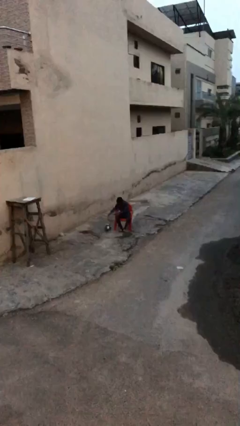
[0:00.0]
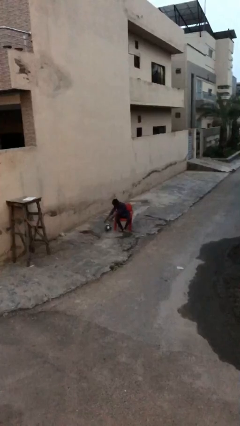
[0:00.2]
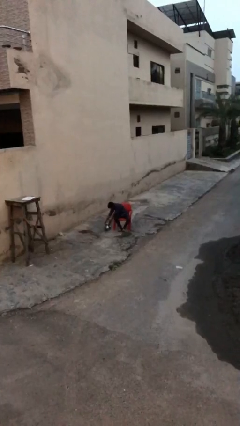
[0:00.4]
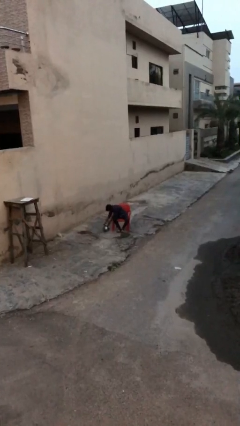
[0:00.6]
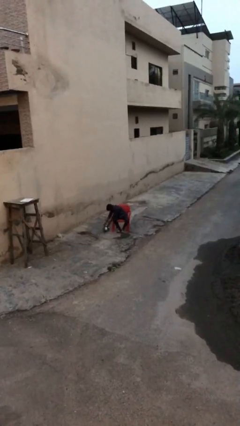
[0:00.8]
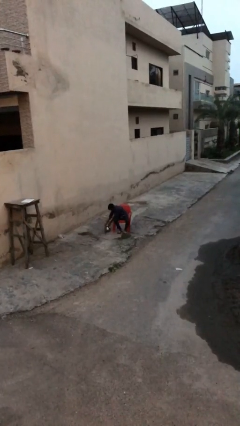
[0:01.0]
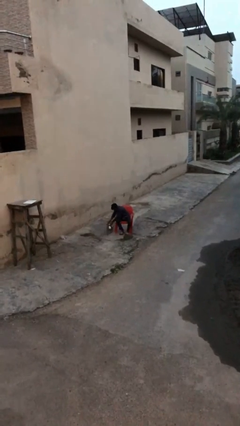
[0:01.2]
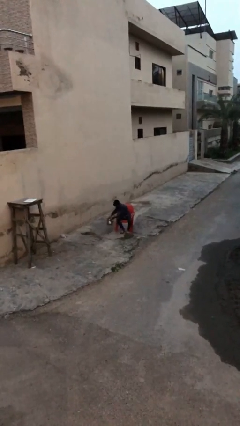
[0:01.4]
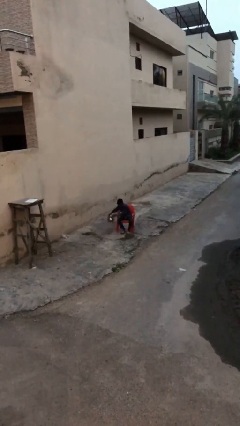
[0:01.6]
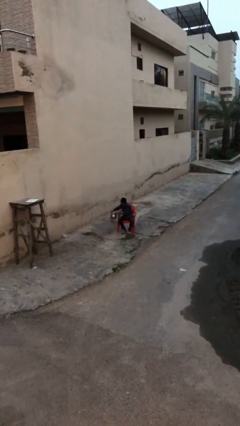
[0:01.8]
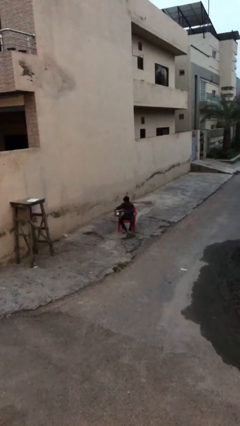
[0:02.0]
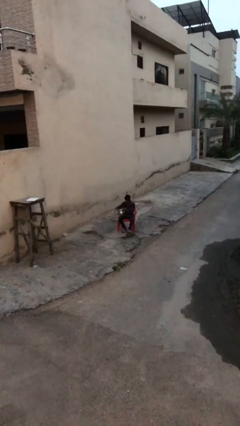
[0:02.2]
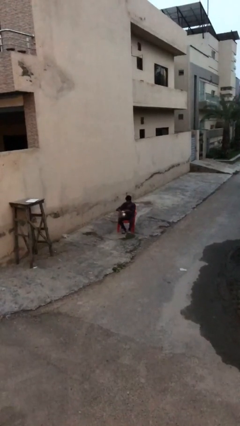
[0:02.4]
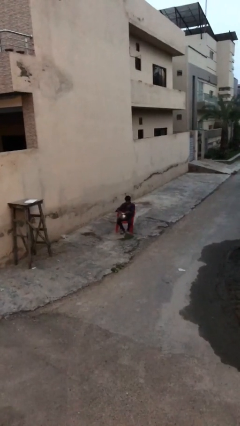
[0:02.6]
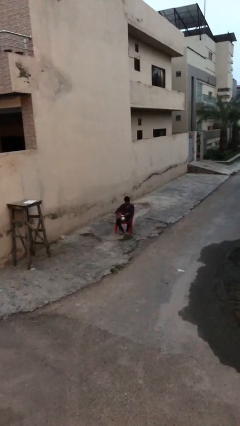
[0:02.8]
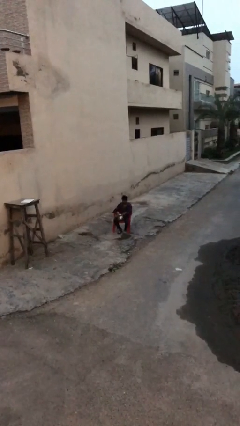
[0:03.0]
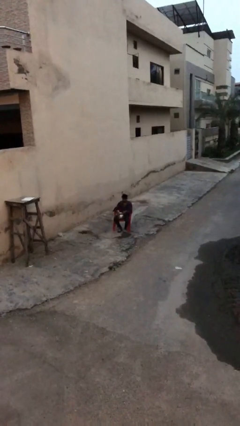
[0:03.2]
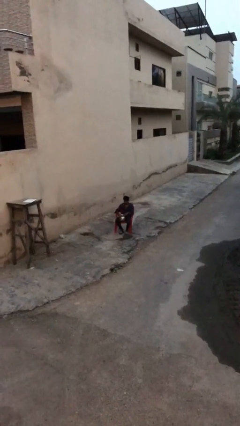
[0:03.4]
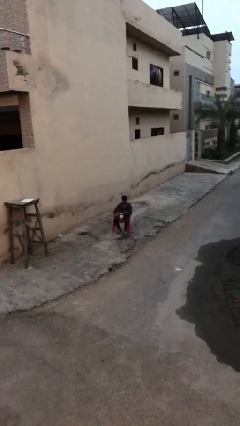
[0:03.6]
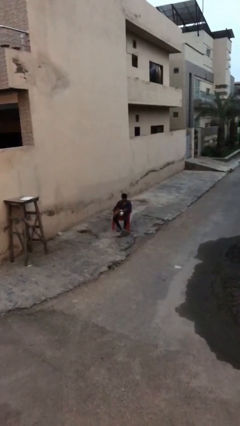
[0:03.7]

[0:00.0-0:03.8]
person picks up object from floor

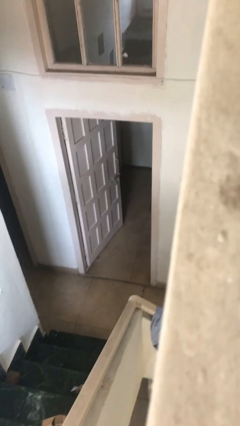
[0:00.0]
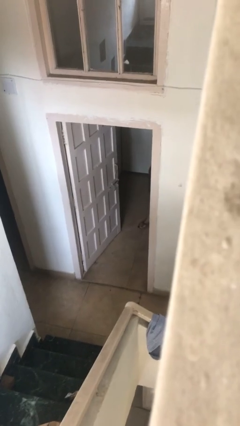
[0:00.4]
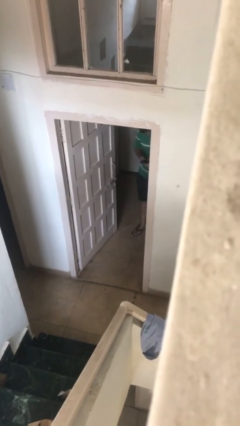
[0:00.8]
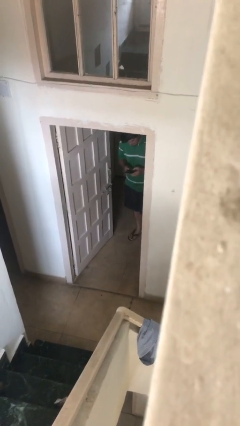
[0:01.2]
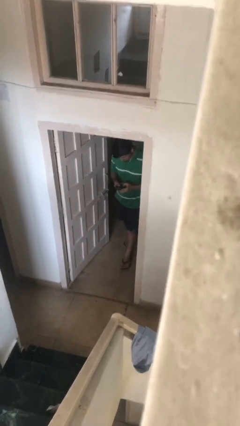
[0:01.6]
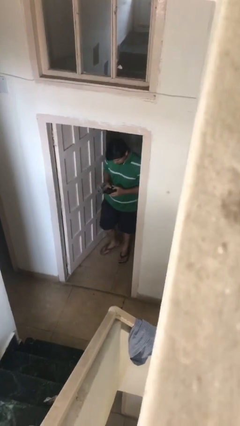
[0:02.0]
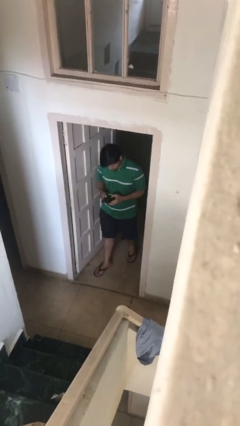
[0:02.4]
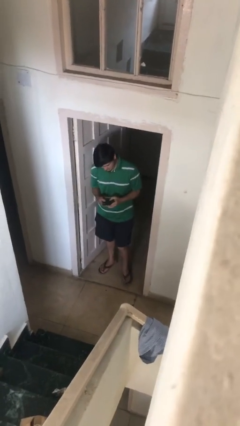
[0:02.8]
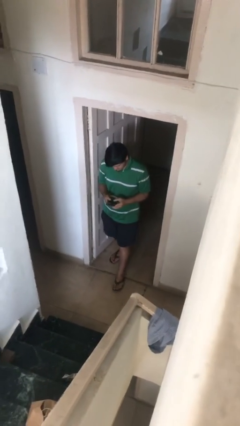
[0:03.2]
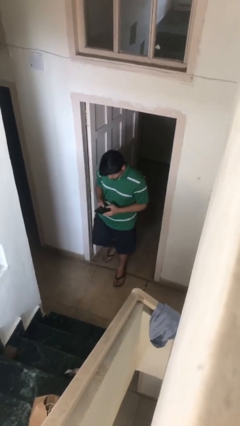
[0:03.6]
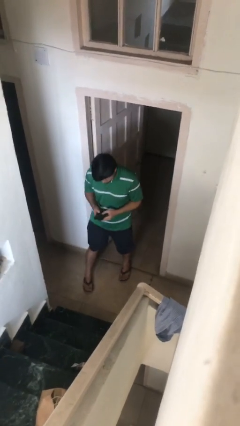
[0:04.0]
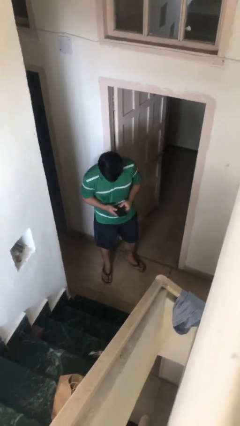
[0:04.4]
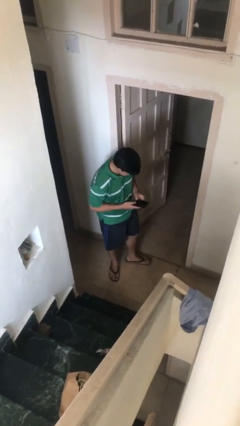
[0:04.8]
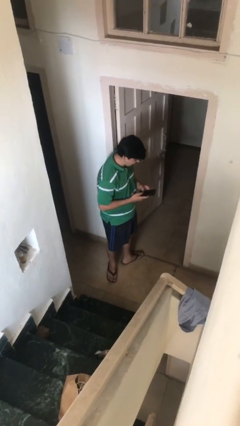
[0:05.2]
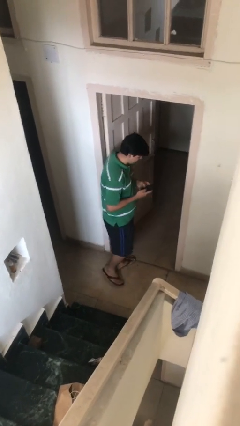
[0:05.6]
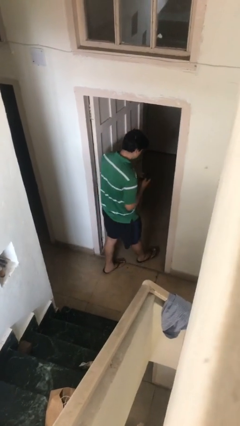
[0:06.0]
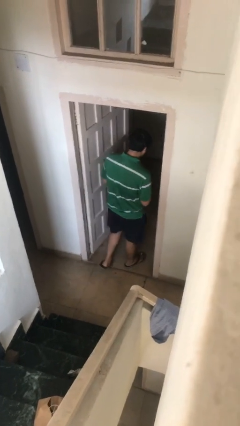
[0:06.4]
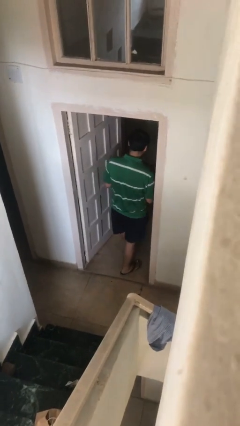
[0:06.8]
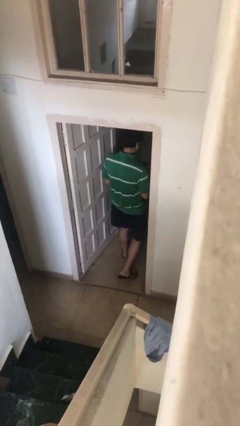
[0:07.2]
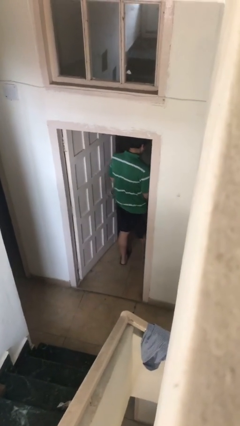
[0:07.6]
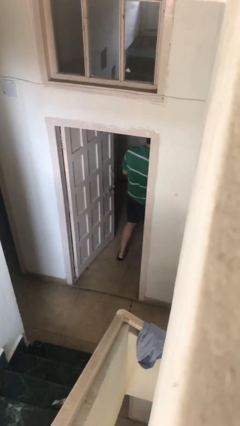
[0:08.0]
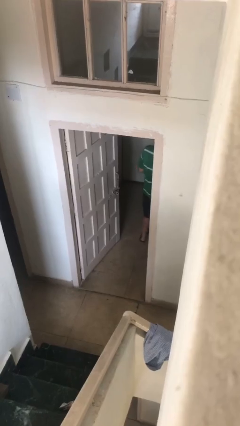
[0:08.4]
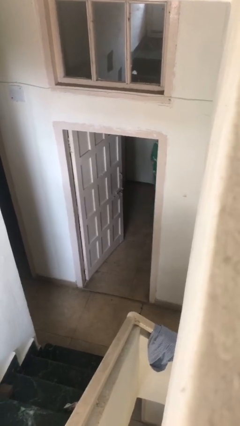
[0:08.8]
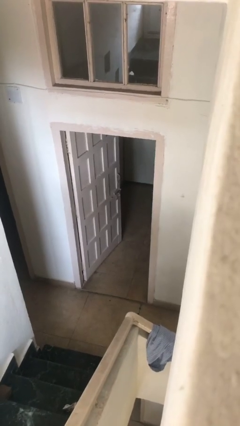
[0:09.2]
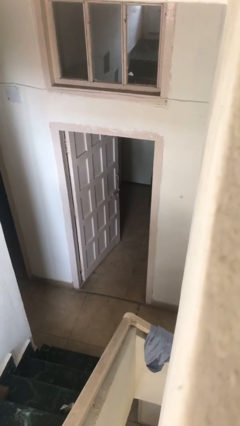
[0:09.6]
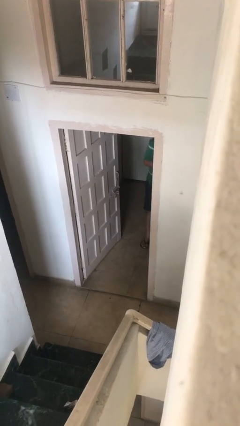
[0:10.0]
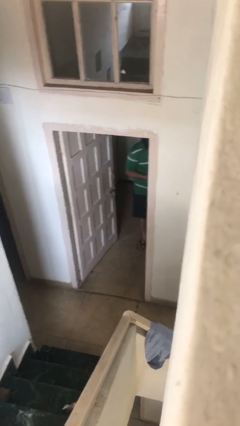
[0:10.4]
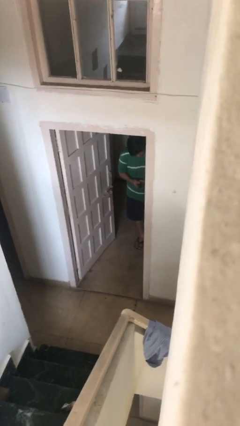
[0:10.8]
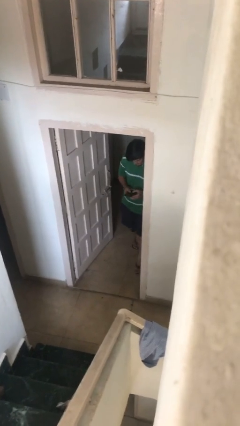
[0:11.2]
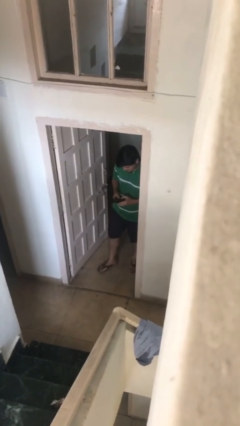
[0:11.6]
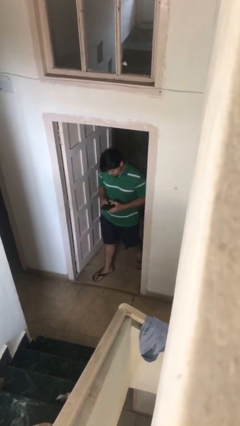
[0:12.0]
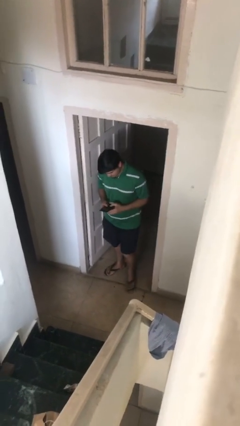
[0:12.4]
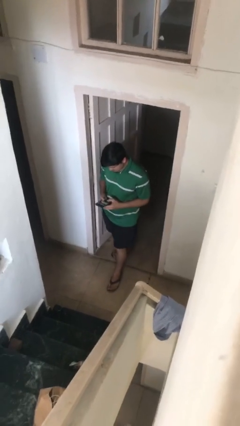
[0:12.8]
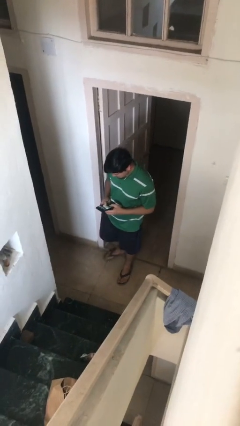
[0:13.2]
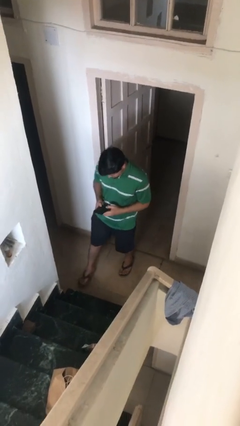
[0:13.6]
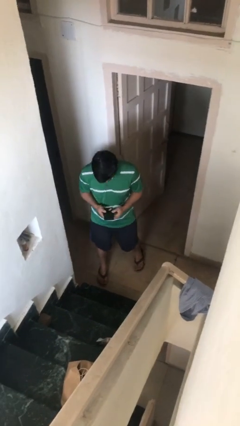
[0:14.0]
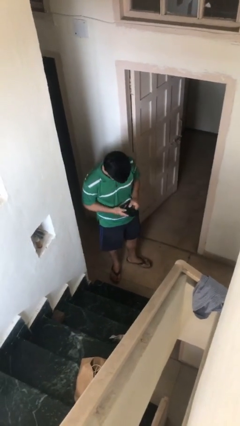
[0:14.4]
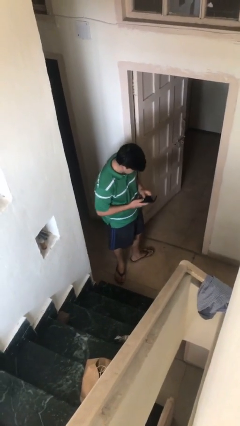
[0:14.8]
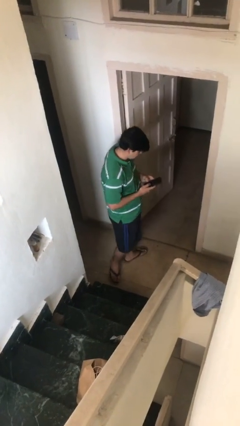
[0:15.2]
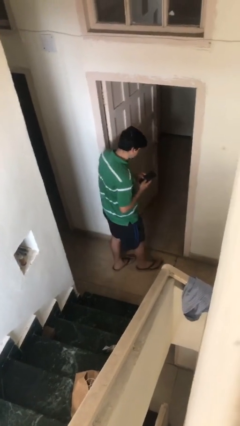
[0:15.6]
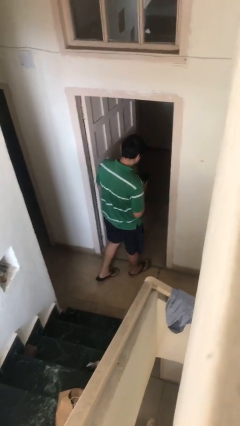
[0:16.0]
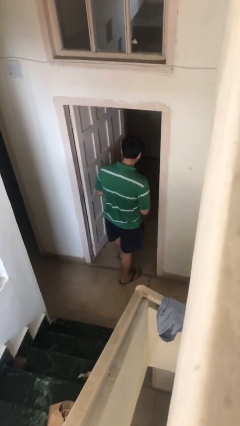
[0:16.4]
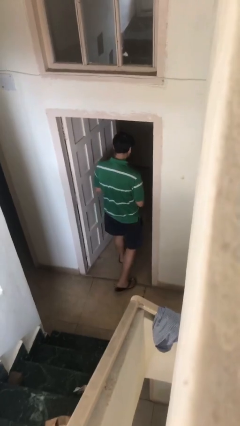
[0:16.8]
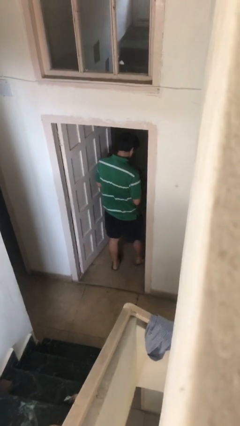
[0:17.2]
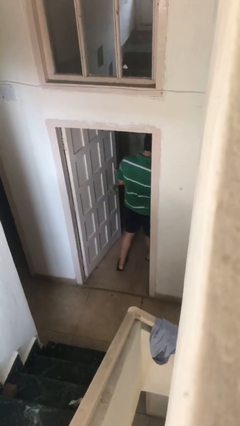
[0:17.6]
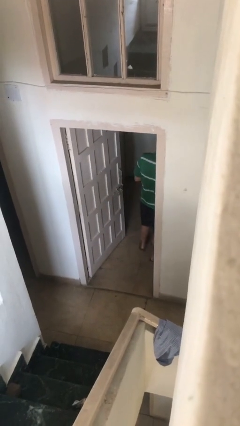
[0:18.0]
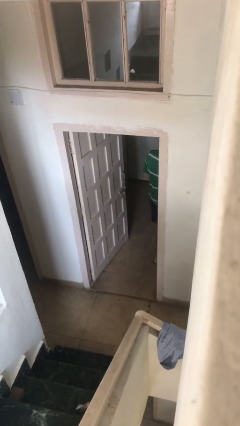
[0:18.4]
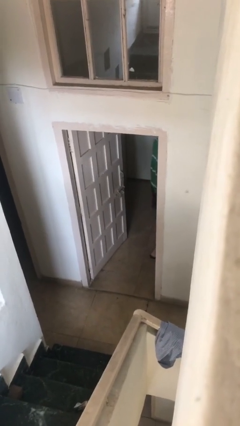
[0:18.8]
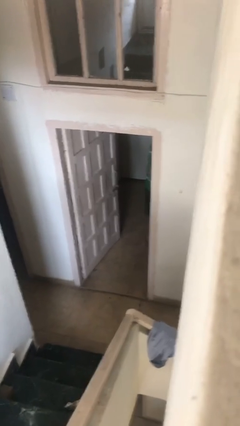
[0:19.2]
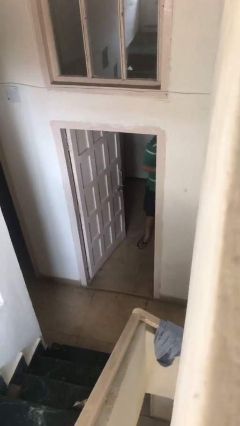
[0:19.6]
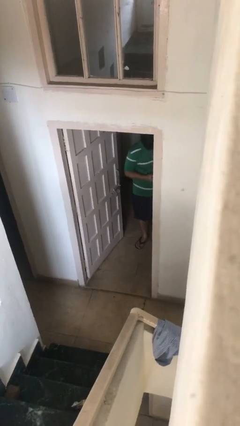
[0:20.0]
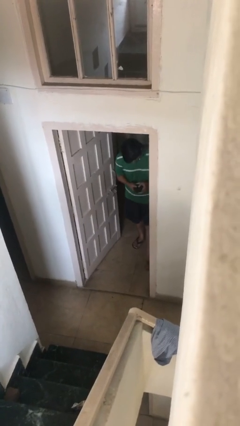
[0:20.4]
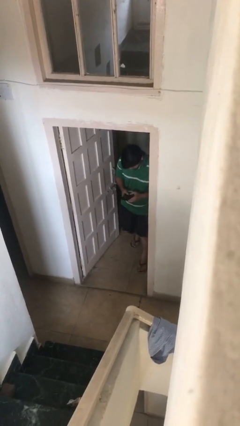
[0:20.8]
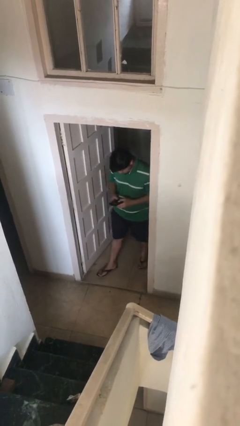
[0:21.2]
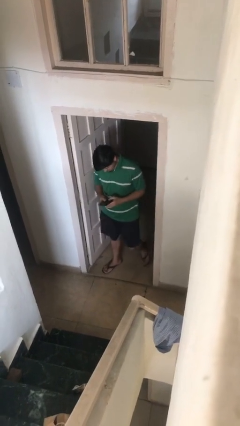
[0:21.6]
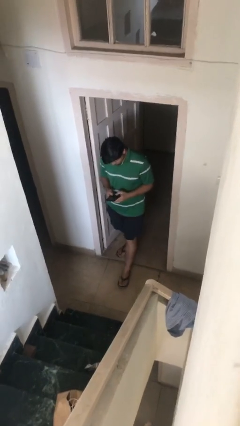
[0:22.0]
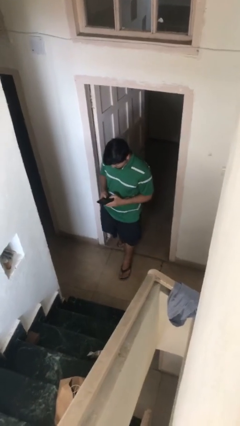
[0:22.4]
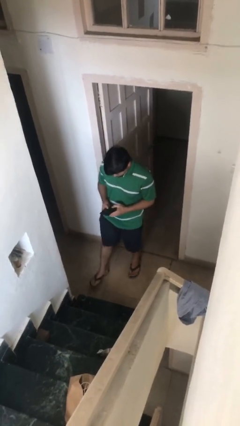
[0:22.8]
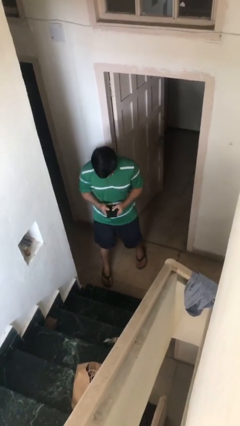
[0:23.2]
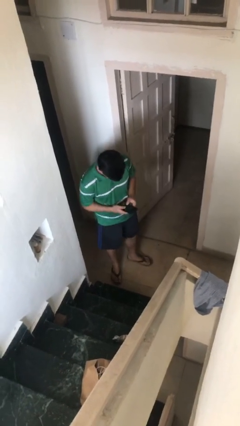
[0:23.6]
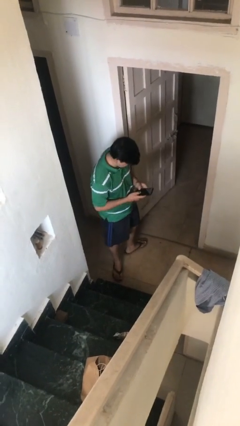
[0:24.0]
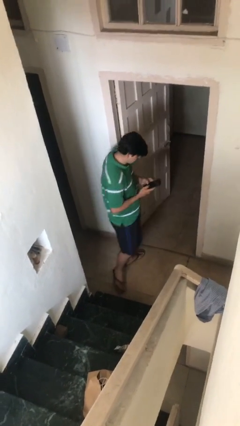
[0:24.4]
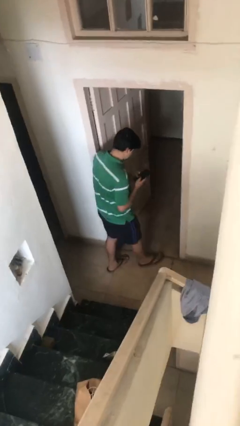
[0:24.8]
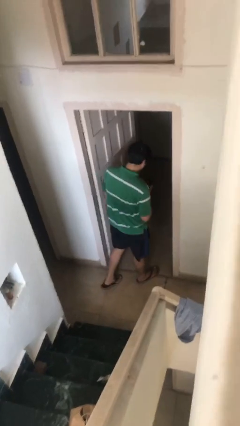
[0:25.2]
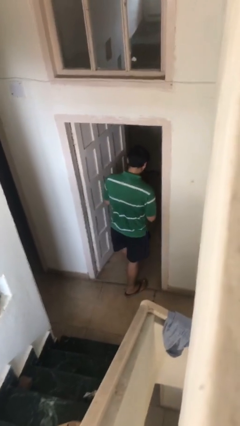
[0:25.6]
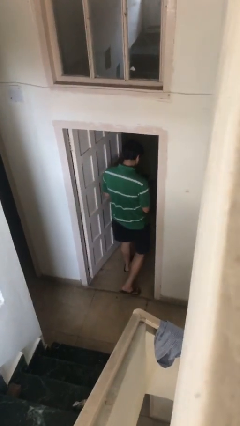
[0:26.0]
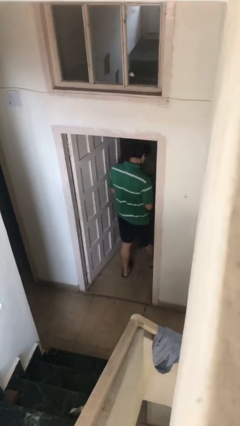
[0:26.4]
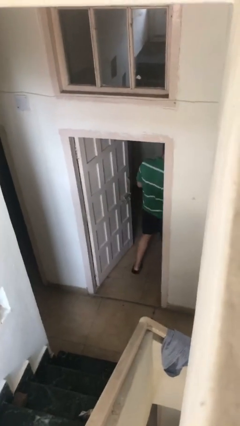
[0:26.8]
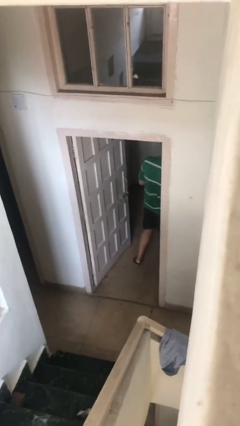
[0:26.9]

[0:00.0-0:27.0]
person texts on phone

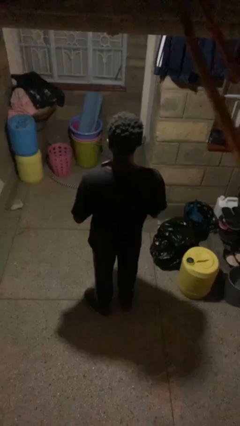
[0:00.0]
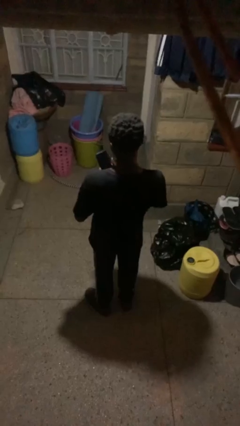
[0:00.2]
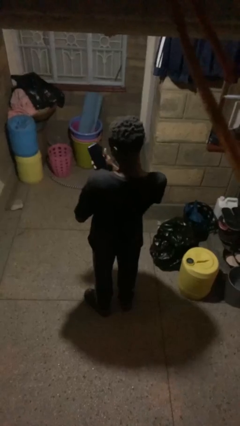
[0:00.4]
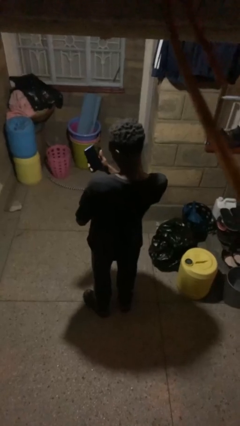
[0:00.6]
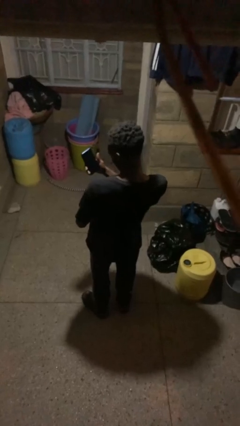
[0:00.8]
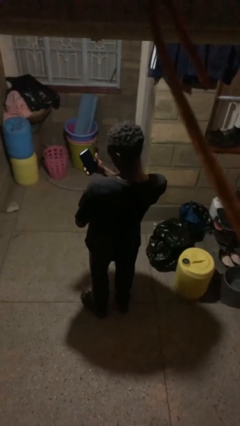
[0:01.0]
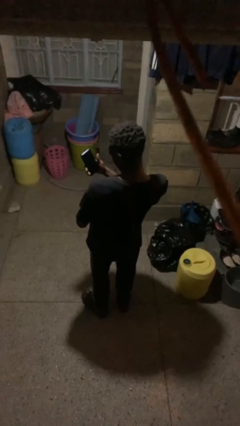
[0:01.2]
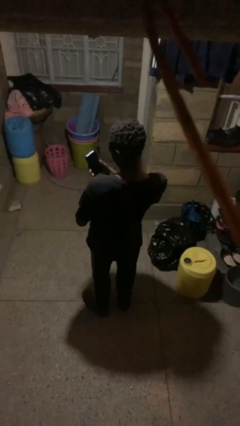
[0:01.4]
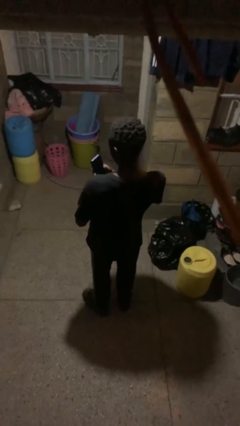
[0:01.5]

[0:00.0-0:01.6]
person takes selfie
